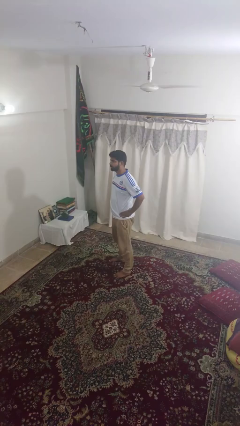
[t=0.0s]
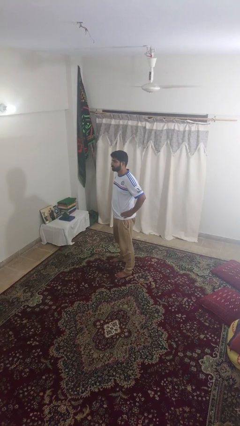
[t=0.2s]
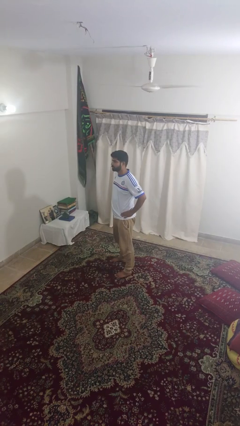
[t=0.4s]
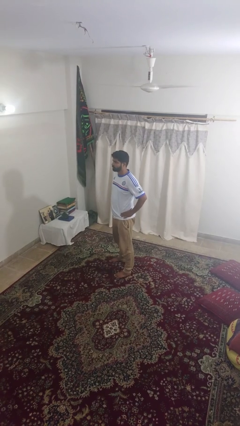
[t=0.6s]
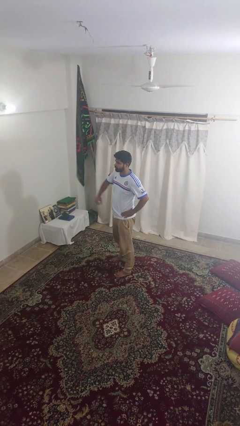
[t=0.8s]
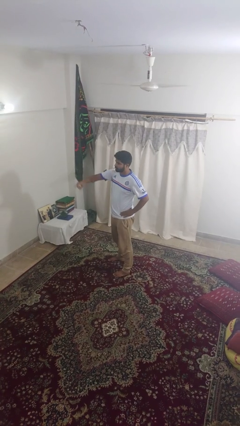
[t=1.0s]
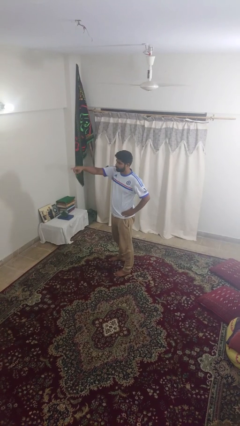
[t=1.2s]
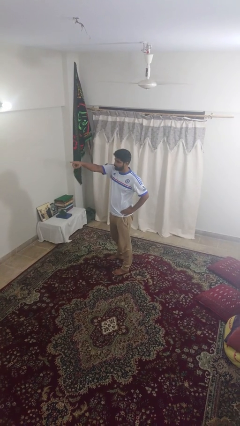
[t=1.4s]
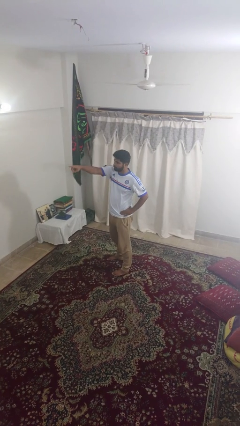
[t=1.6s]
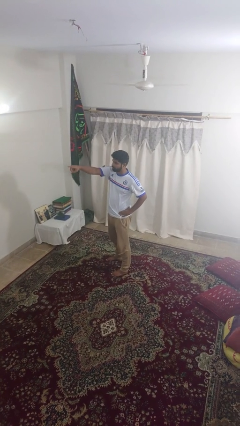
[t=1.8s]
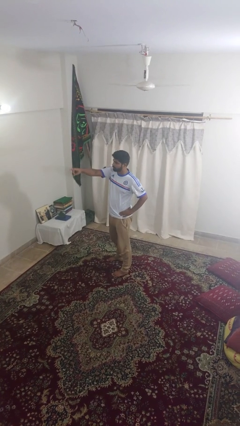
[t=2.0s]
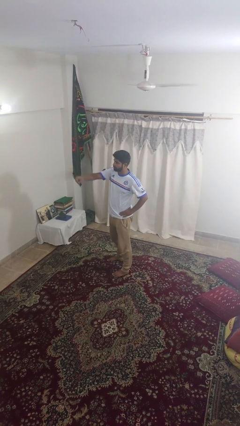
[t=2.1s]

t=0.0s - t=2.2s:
person points at person

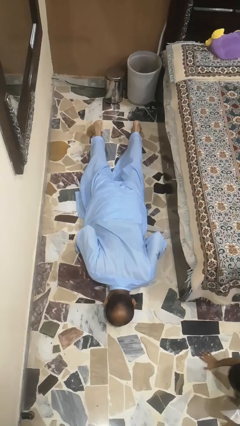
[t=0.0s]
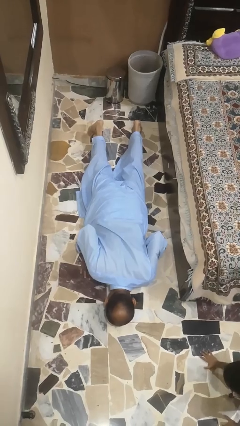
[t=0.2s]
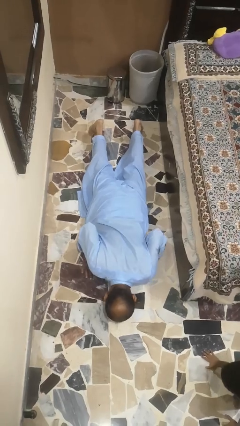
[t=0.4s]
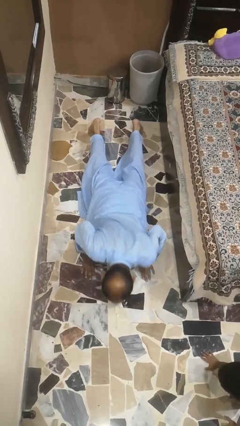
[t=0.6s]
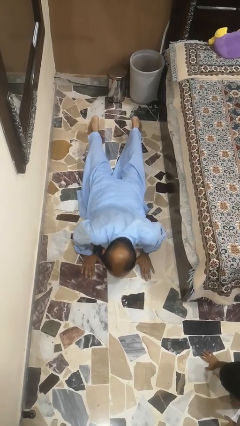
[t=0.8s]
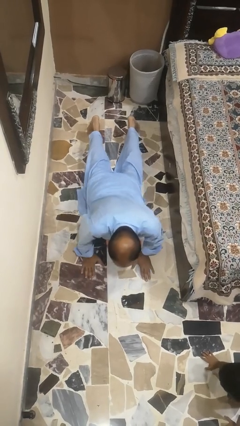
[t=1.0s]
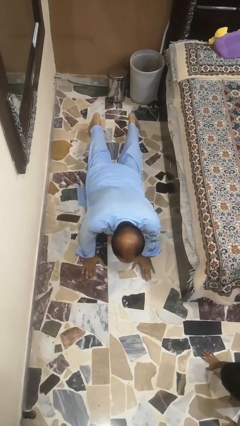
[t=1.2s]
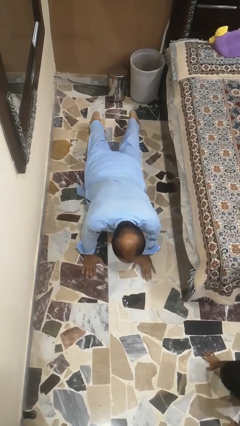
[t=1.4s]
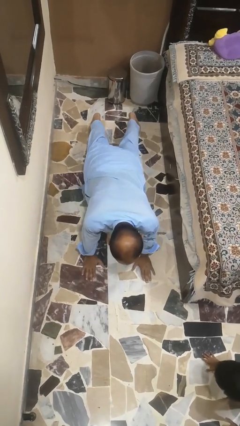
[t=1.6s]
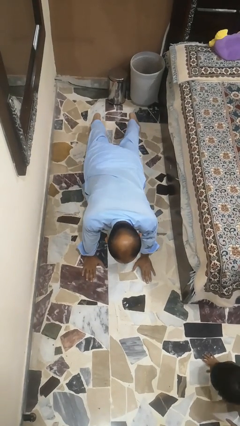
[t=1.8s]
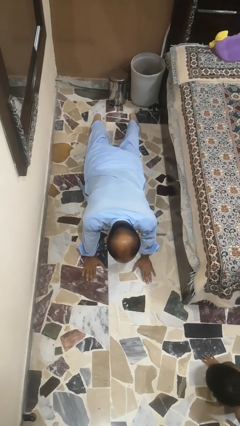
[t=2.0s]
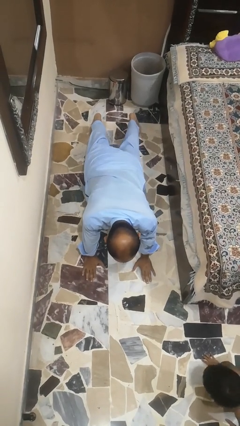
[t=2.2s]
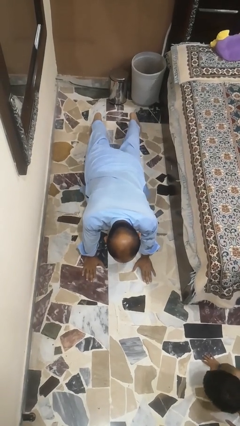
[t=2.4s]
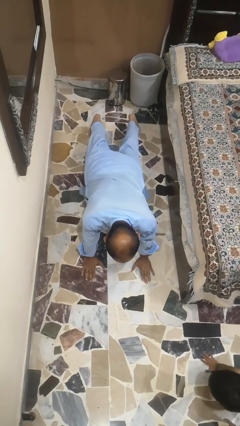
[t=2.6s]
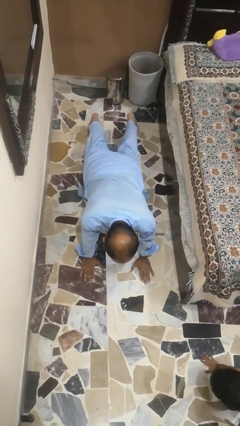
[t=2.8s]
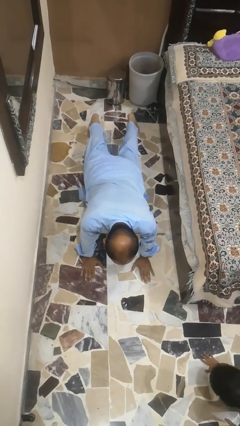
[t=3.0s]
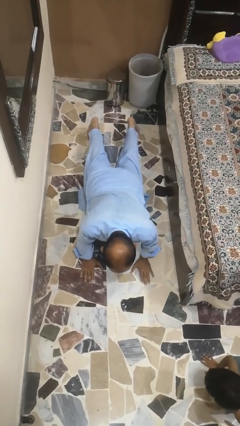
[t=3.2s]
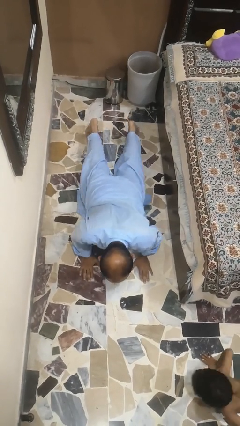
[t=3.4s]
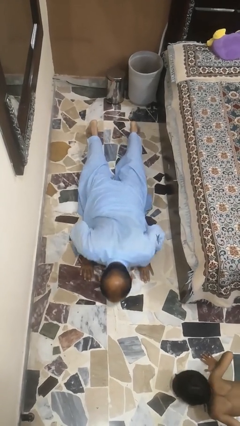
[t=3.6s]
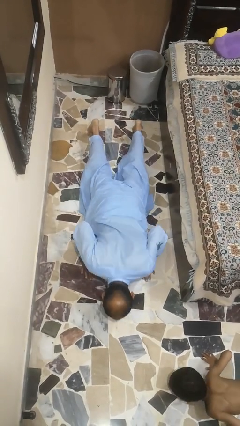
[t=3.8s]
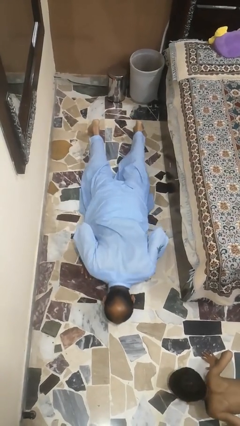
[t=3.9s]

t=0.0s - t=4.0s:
person exercises with pushup

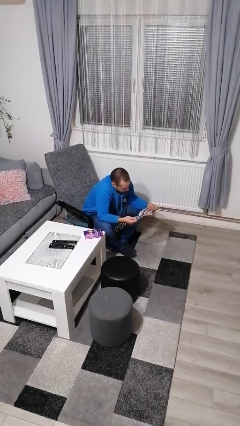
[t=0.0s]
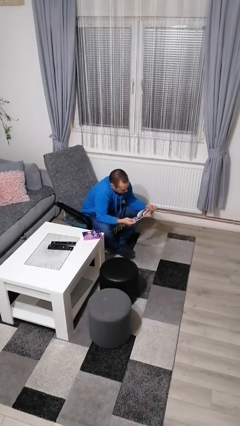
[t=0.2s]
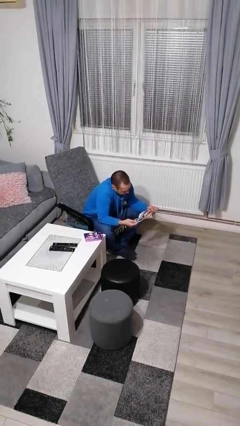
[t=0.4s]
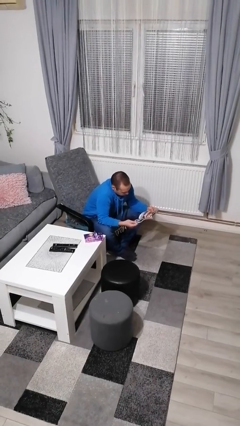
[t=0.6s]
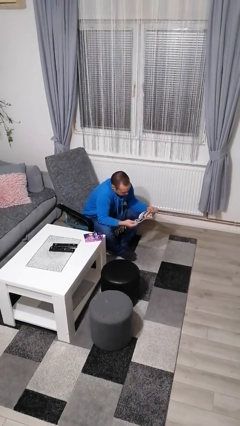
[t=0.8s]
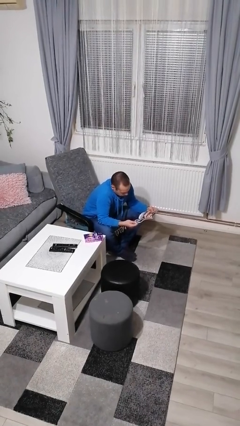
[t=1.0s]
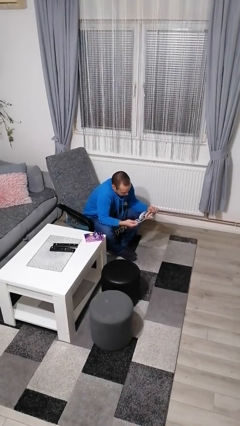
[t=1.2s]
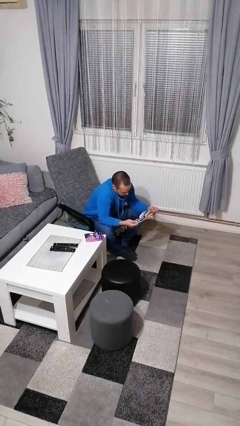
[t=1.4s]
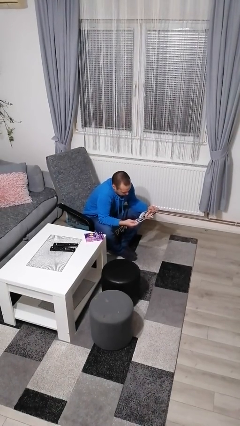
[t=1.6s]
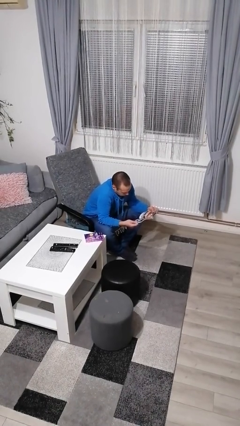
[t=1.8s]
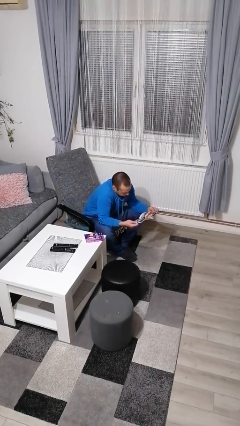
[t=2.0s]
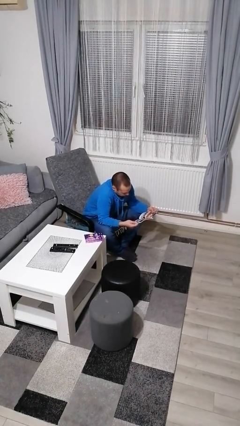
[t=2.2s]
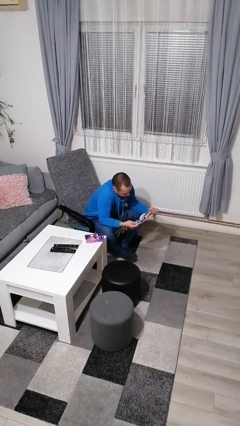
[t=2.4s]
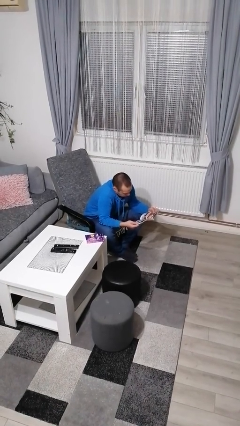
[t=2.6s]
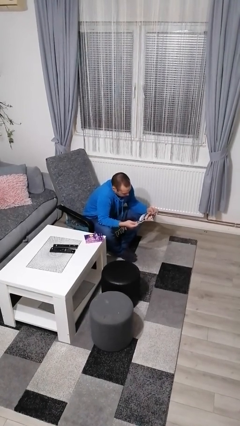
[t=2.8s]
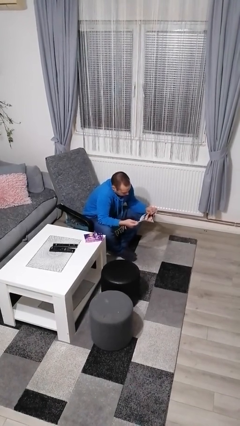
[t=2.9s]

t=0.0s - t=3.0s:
person reads magazine

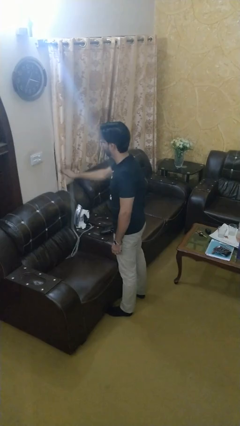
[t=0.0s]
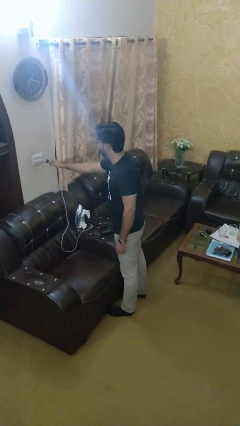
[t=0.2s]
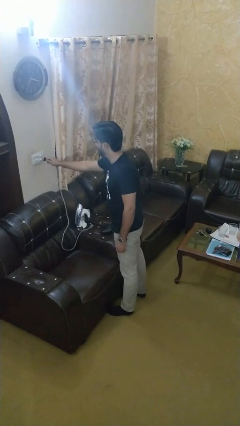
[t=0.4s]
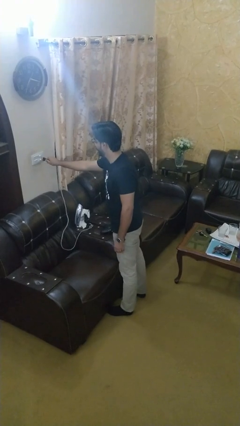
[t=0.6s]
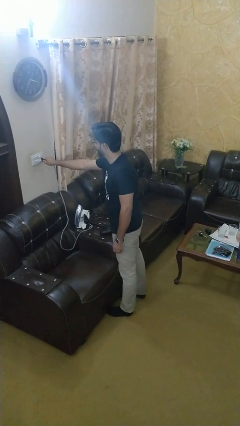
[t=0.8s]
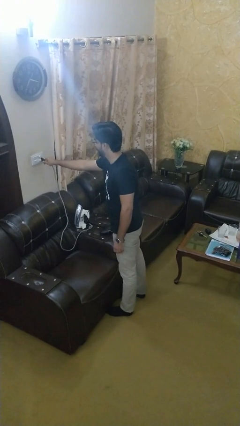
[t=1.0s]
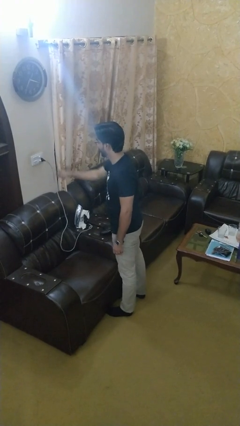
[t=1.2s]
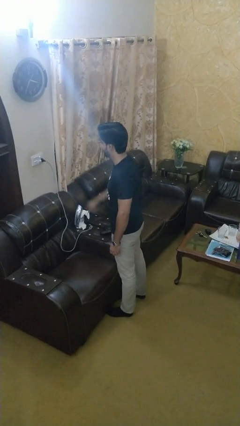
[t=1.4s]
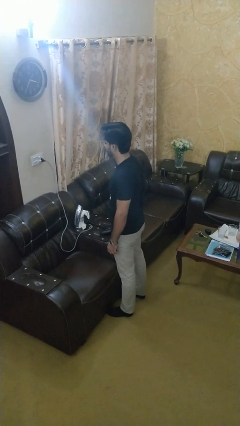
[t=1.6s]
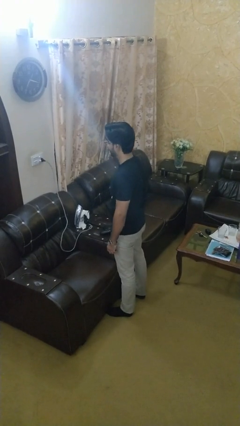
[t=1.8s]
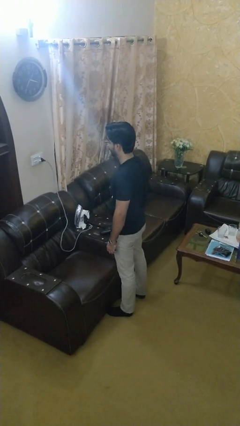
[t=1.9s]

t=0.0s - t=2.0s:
person plugs into electrical socket

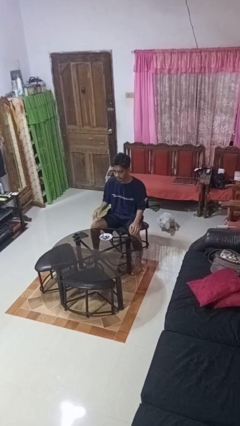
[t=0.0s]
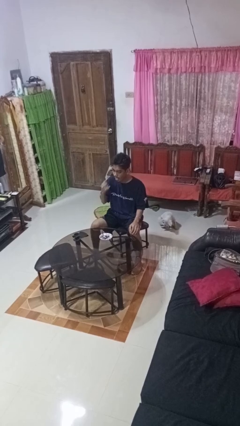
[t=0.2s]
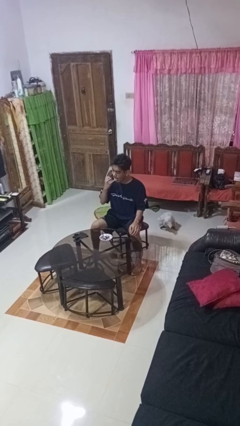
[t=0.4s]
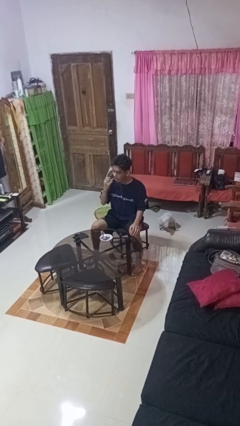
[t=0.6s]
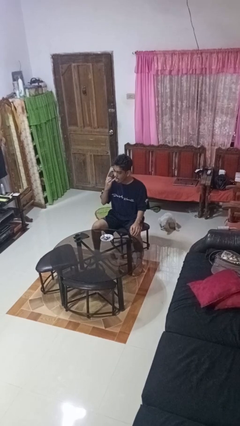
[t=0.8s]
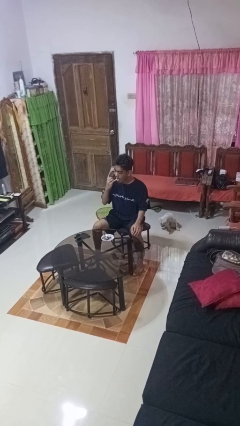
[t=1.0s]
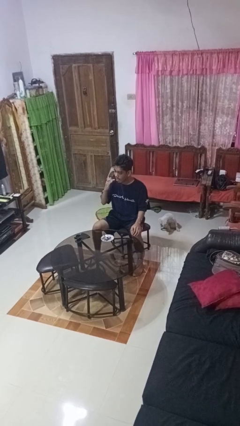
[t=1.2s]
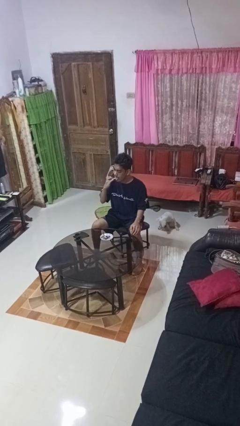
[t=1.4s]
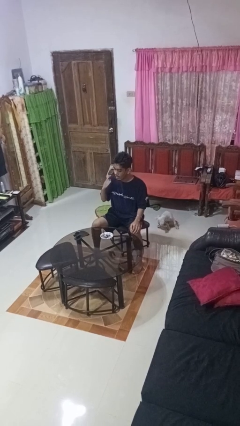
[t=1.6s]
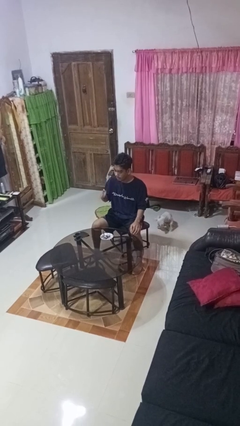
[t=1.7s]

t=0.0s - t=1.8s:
person licks fingers

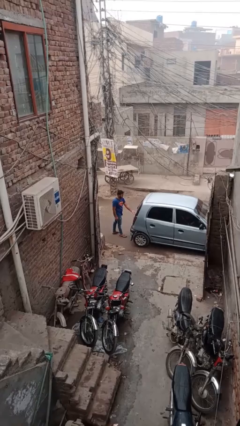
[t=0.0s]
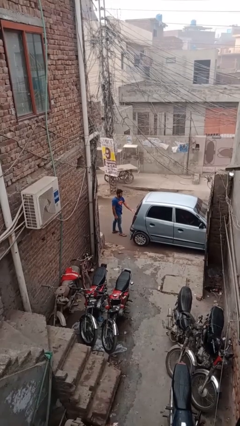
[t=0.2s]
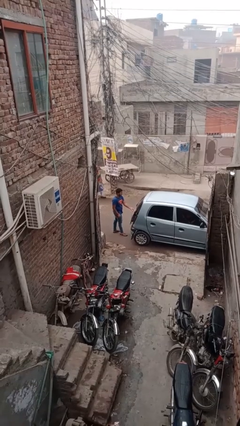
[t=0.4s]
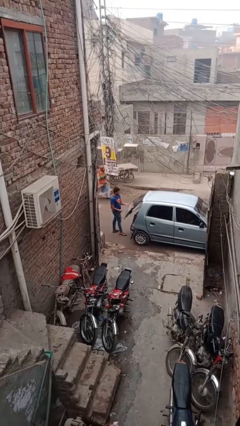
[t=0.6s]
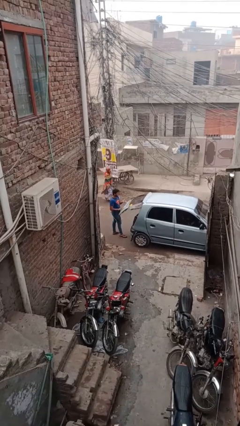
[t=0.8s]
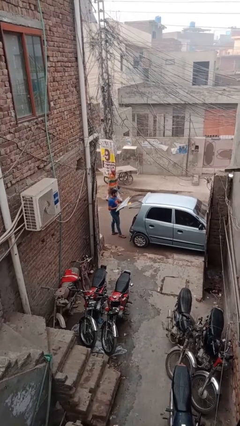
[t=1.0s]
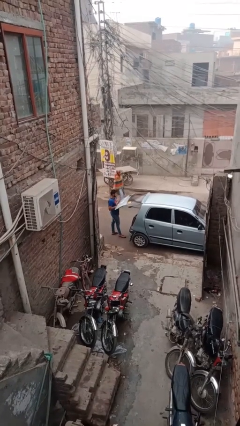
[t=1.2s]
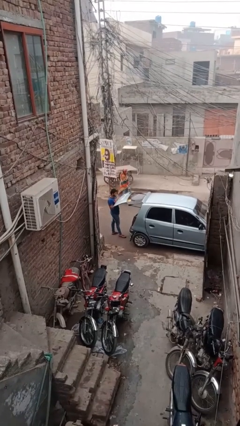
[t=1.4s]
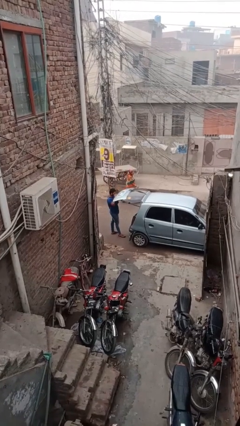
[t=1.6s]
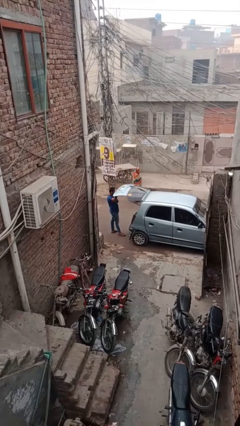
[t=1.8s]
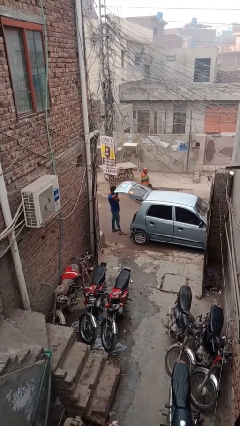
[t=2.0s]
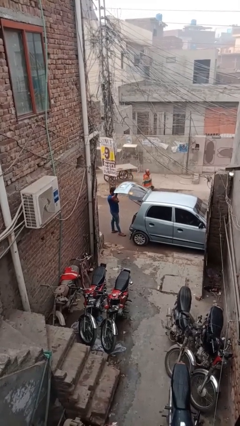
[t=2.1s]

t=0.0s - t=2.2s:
person opens car trunk

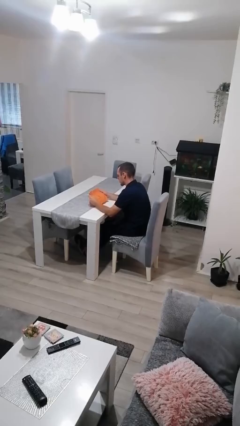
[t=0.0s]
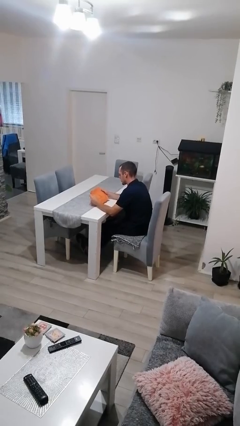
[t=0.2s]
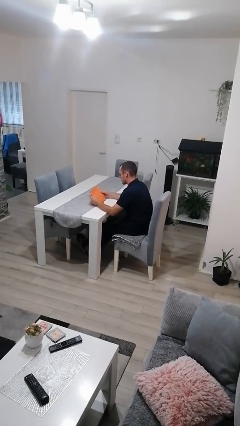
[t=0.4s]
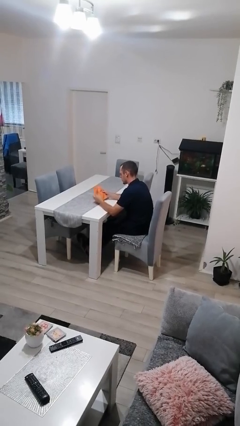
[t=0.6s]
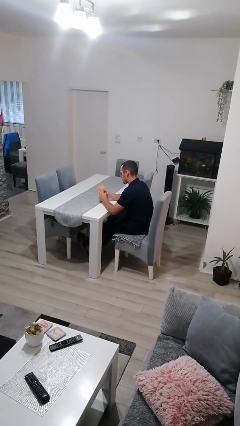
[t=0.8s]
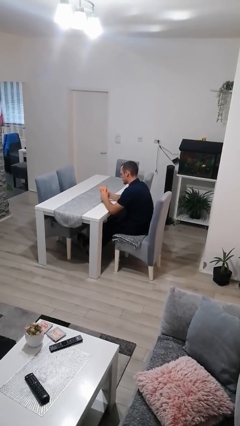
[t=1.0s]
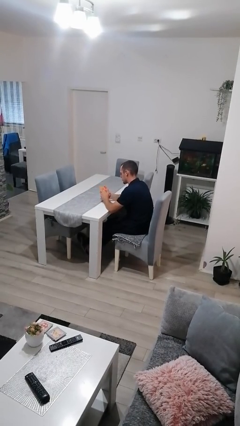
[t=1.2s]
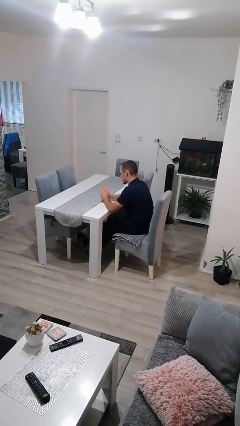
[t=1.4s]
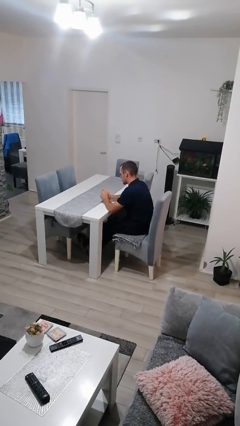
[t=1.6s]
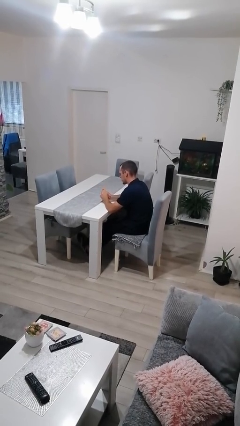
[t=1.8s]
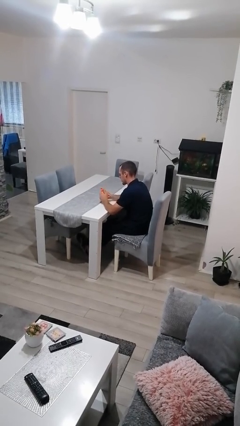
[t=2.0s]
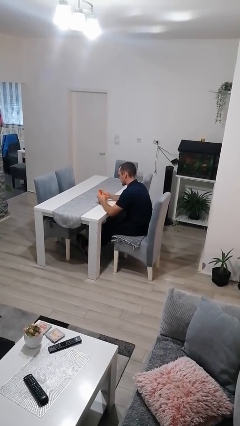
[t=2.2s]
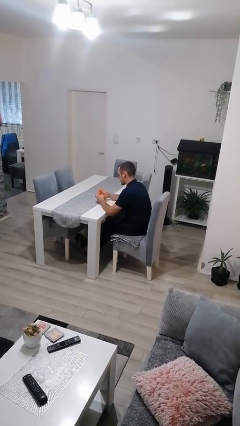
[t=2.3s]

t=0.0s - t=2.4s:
person crumples paper
